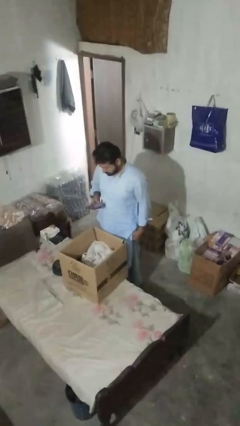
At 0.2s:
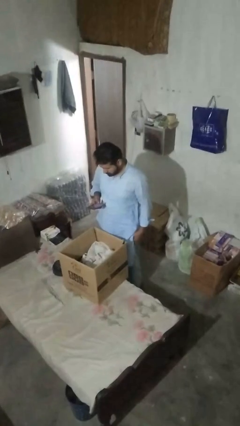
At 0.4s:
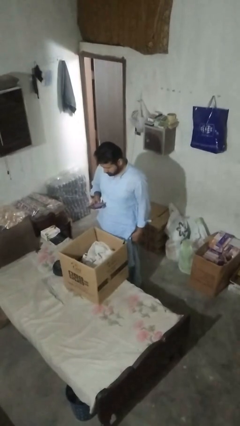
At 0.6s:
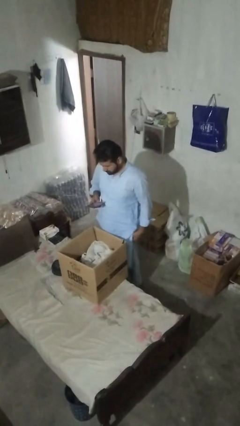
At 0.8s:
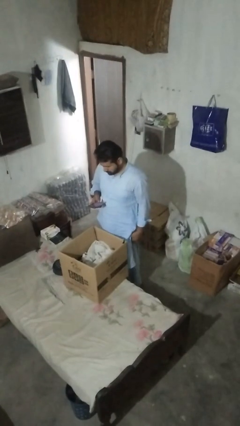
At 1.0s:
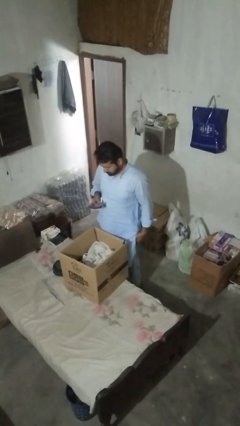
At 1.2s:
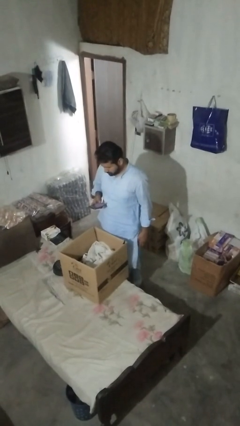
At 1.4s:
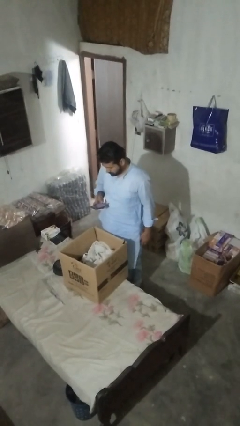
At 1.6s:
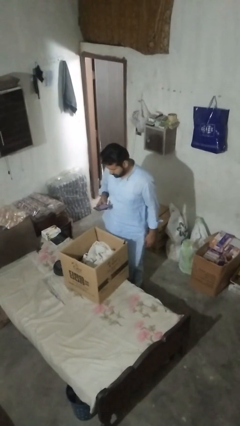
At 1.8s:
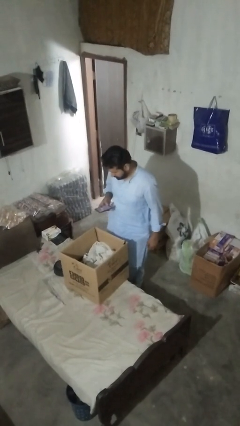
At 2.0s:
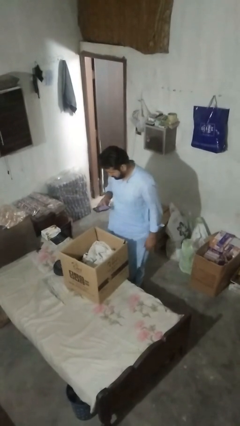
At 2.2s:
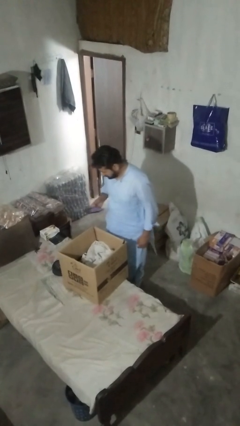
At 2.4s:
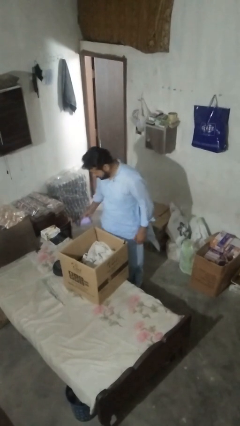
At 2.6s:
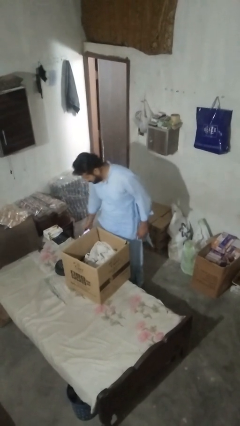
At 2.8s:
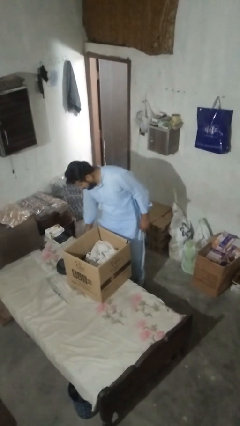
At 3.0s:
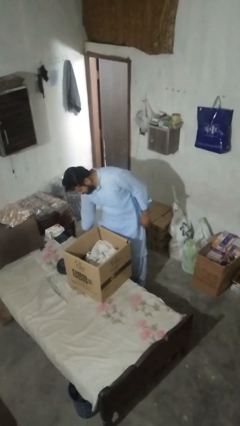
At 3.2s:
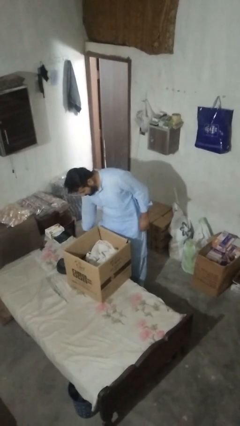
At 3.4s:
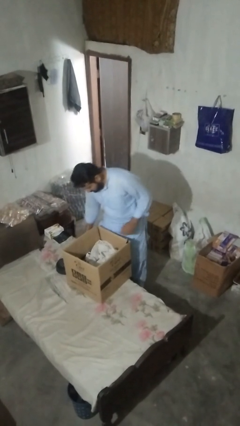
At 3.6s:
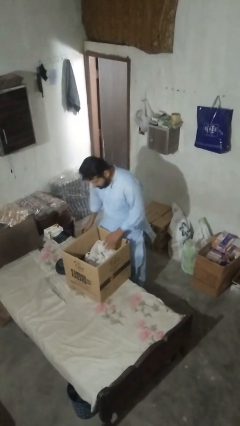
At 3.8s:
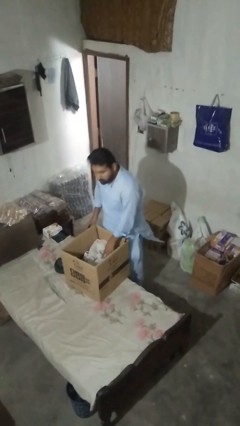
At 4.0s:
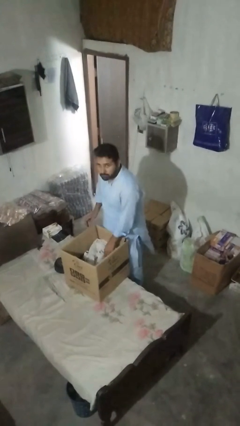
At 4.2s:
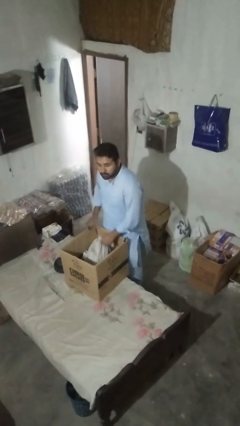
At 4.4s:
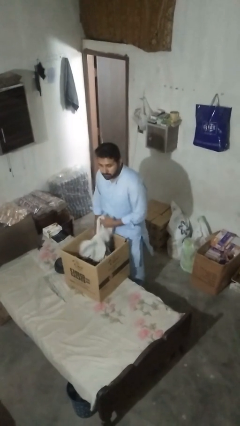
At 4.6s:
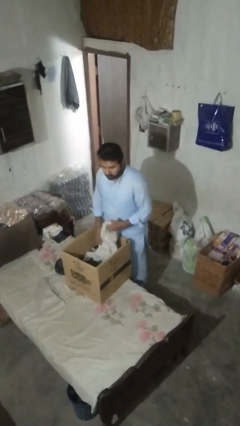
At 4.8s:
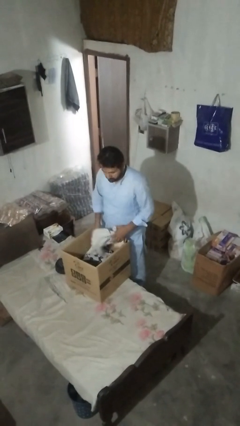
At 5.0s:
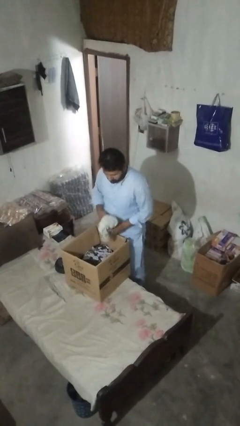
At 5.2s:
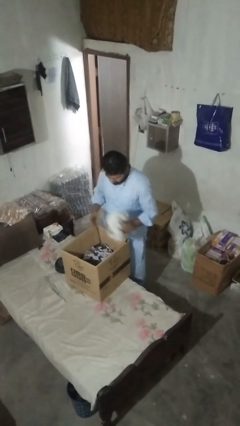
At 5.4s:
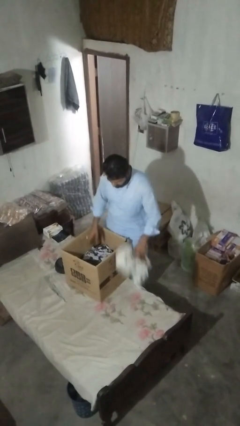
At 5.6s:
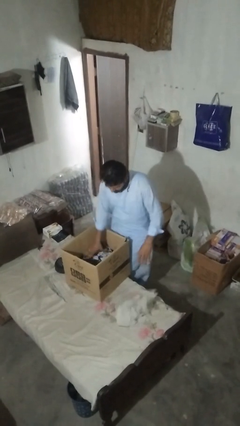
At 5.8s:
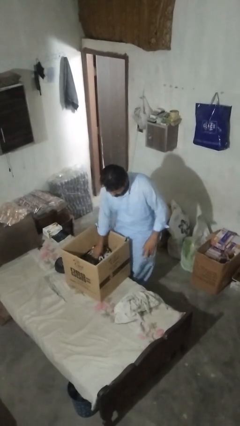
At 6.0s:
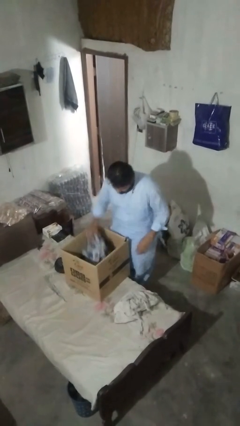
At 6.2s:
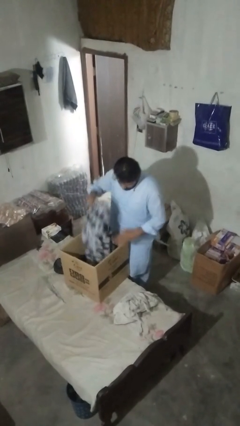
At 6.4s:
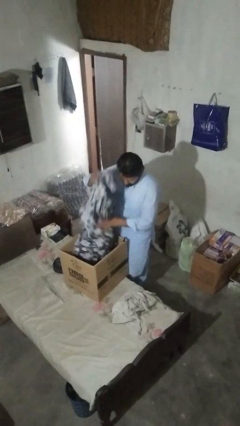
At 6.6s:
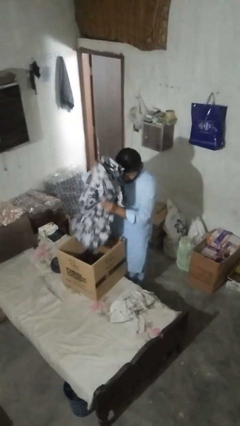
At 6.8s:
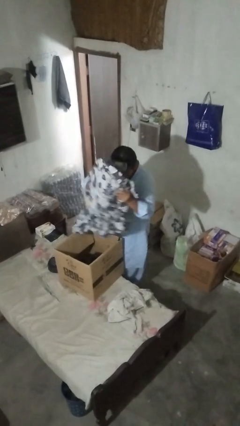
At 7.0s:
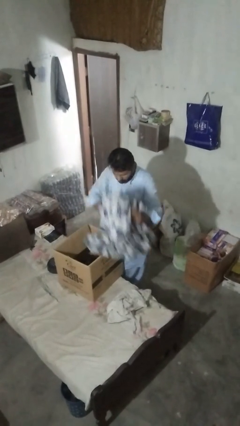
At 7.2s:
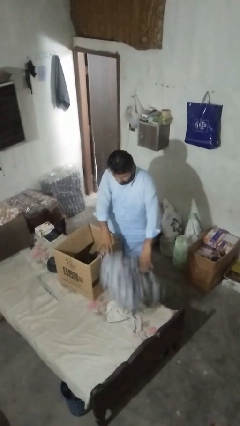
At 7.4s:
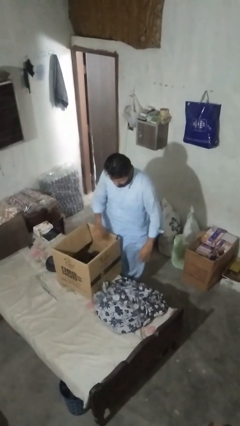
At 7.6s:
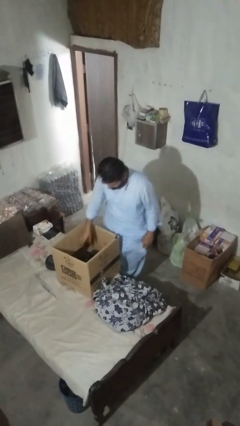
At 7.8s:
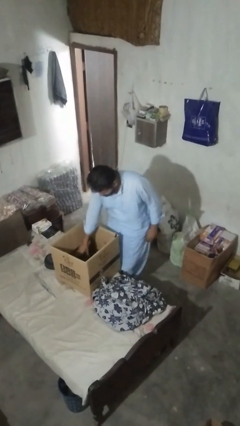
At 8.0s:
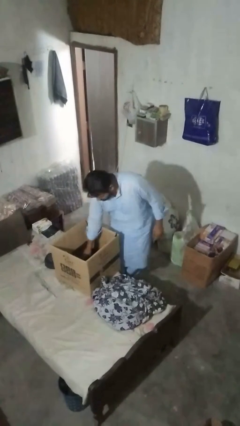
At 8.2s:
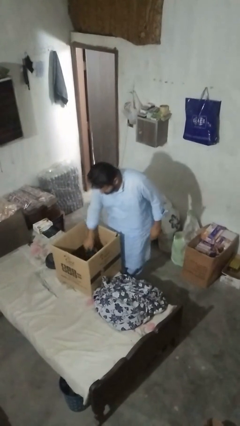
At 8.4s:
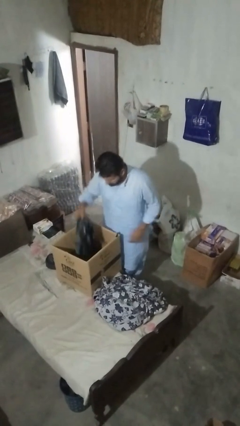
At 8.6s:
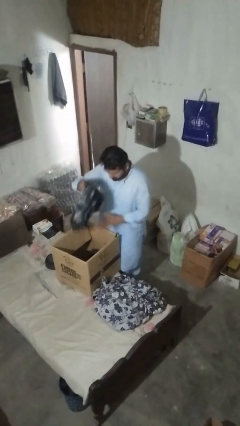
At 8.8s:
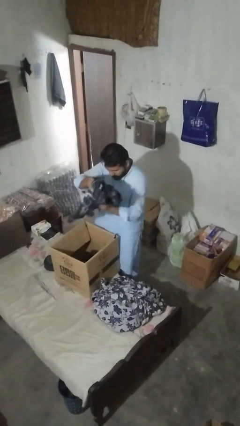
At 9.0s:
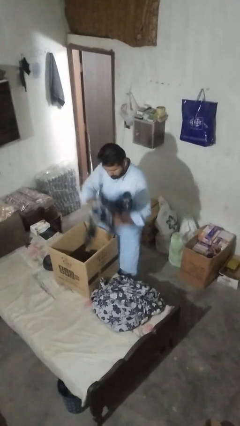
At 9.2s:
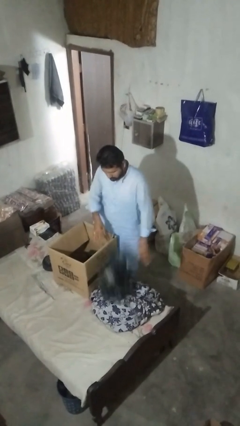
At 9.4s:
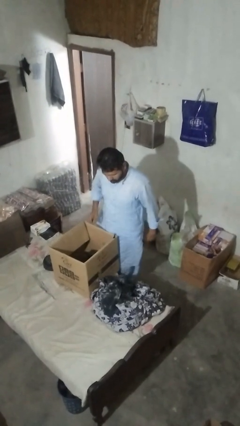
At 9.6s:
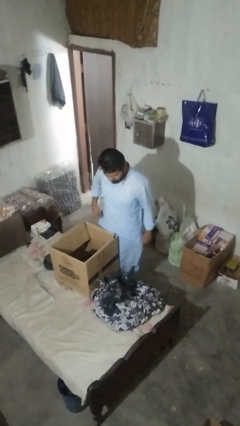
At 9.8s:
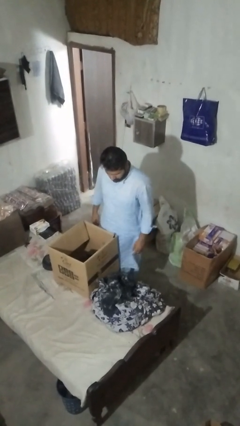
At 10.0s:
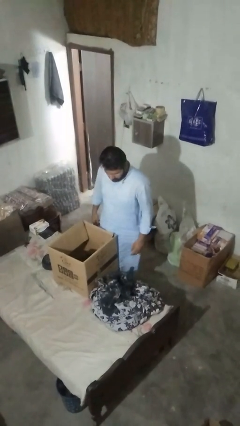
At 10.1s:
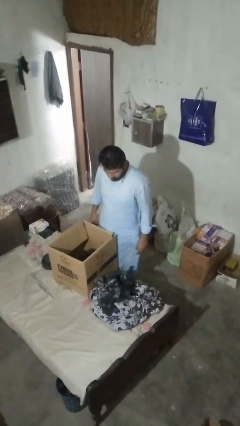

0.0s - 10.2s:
person unloads clotheswasher

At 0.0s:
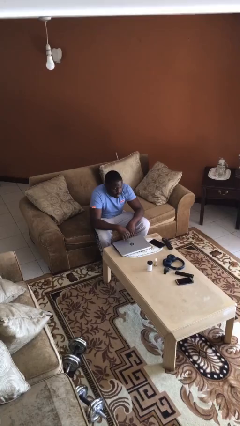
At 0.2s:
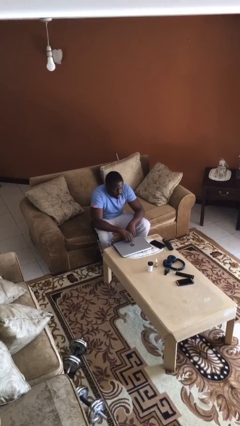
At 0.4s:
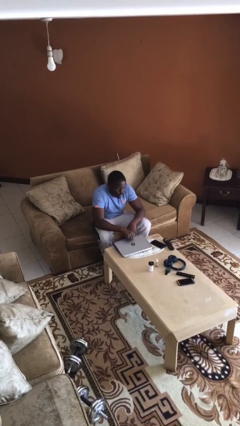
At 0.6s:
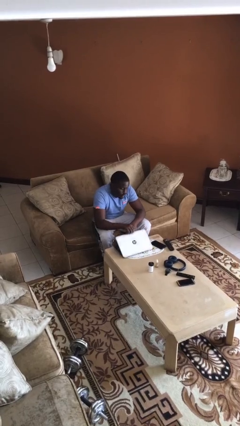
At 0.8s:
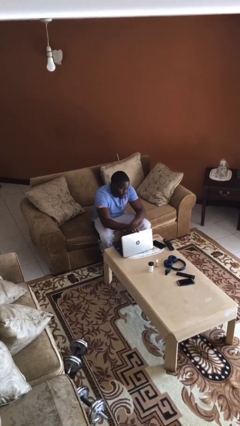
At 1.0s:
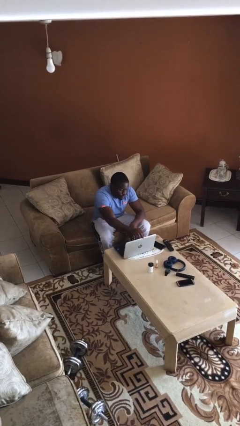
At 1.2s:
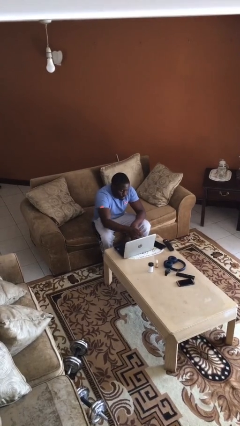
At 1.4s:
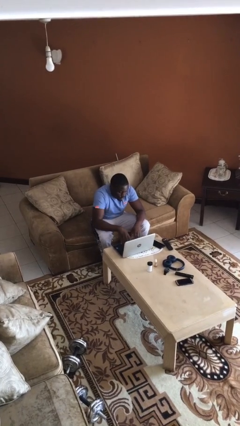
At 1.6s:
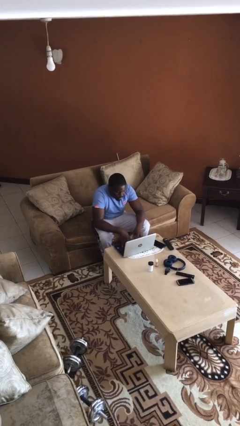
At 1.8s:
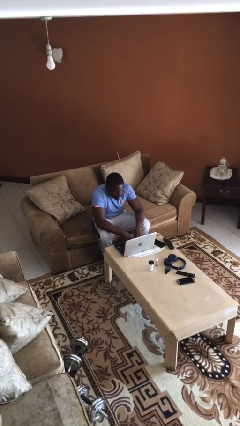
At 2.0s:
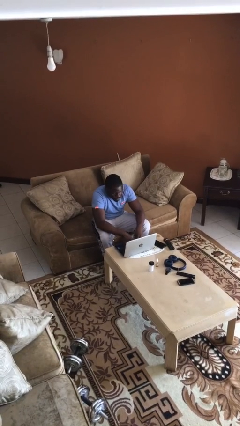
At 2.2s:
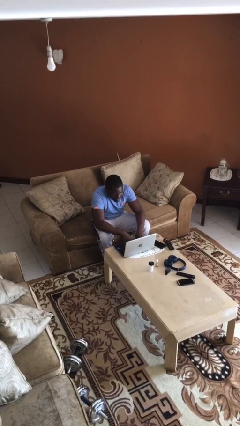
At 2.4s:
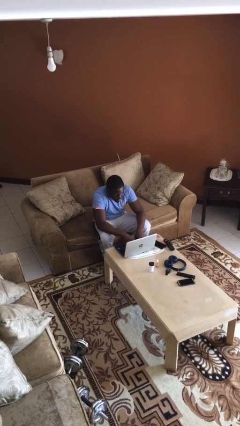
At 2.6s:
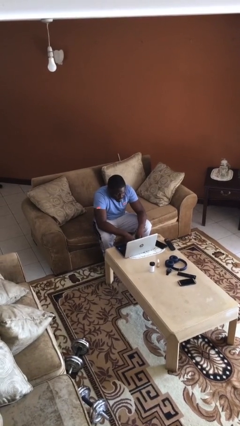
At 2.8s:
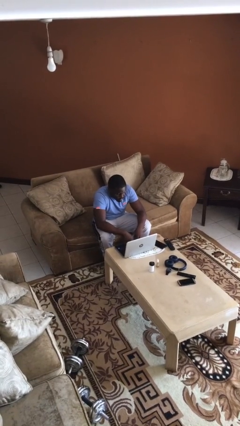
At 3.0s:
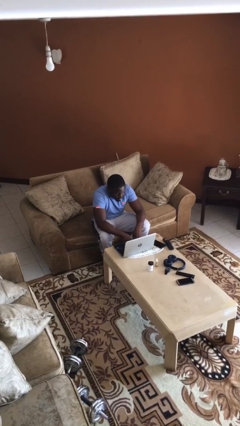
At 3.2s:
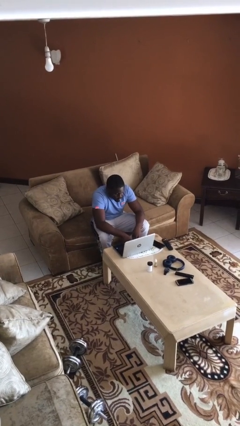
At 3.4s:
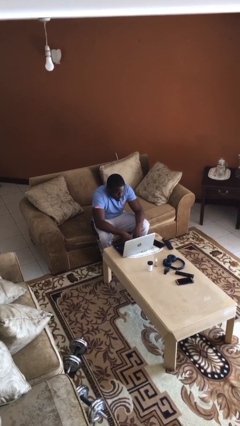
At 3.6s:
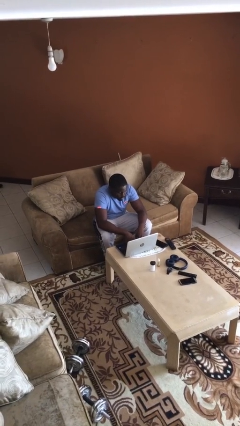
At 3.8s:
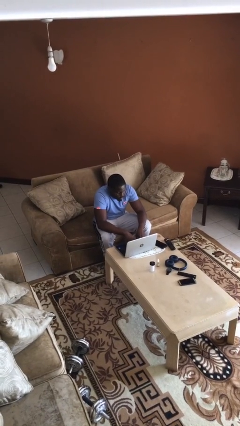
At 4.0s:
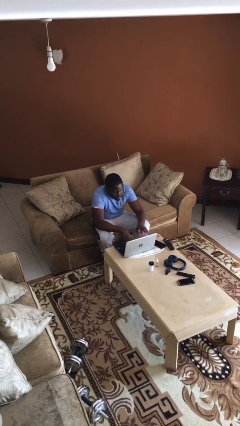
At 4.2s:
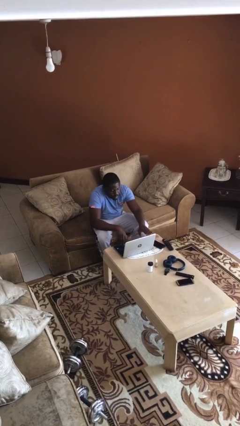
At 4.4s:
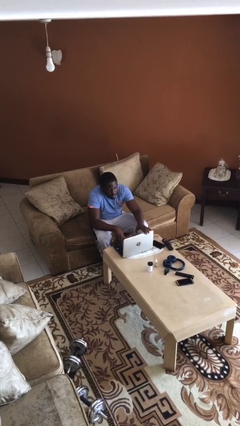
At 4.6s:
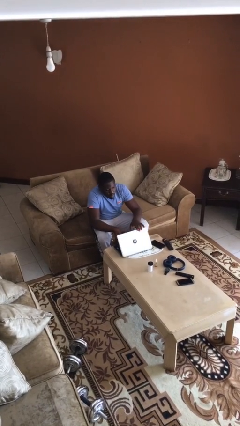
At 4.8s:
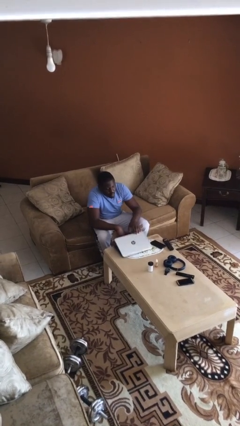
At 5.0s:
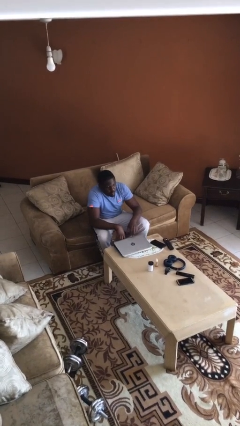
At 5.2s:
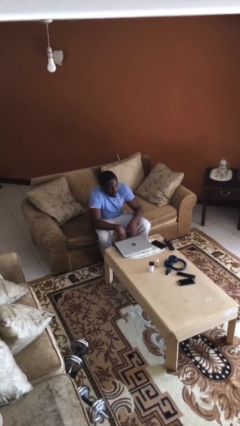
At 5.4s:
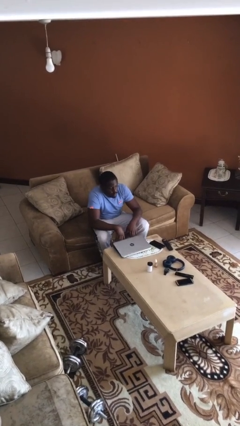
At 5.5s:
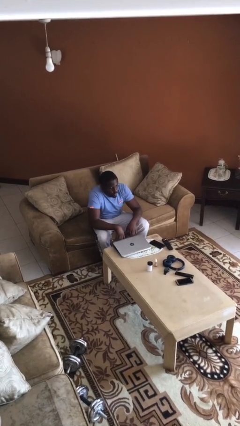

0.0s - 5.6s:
person interacts with laptop

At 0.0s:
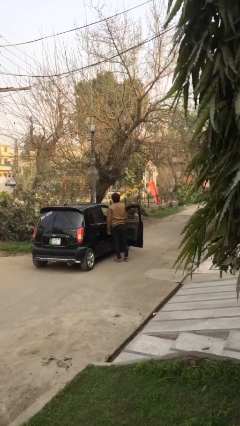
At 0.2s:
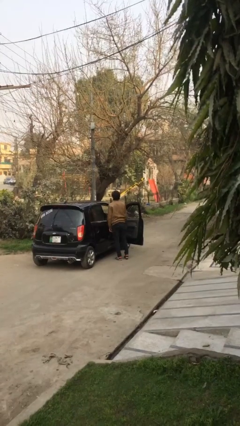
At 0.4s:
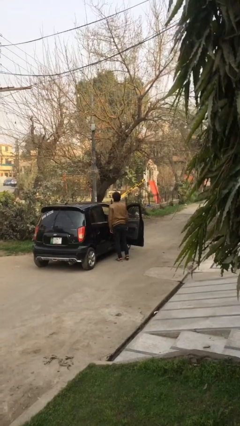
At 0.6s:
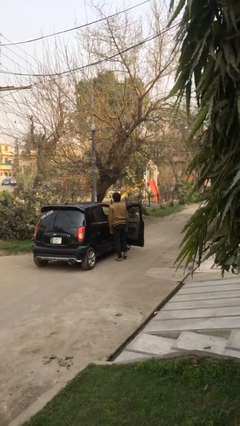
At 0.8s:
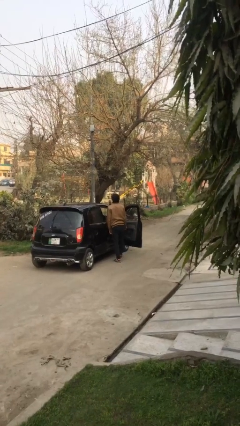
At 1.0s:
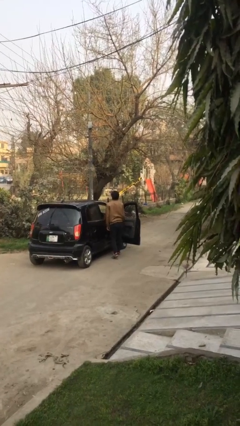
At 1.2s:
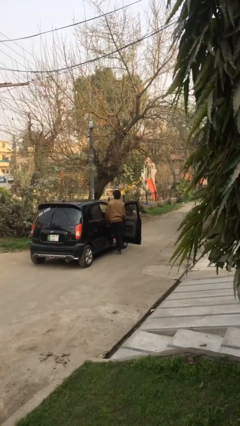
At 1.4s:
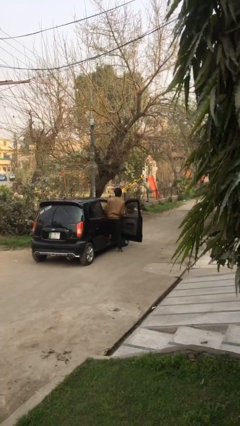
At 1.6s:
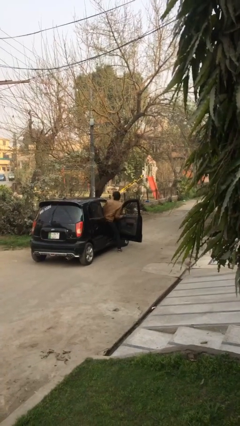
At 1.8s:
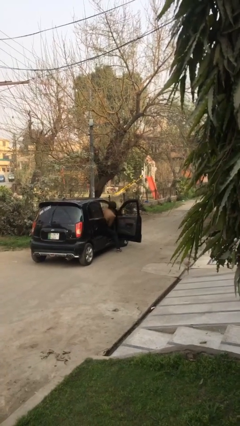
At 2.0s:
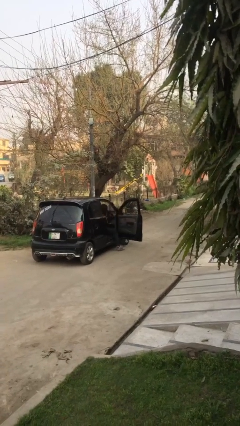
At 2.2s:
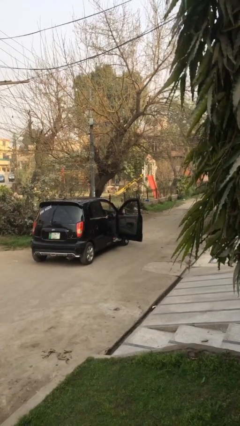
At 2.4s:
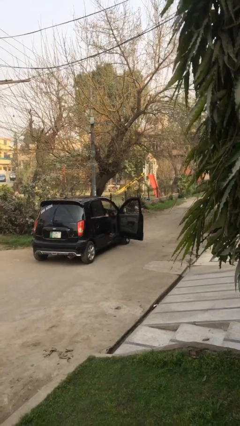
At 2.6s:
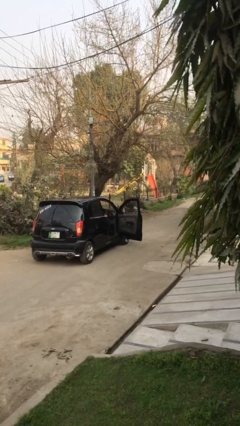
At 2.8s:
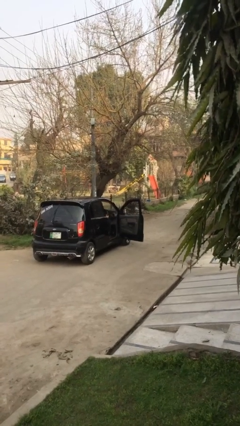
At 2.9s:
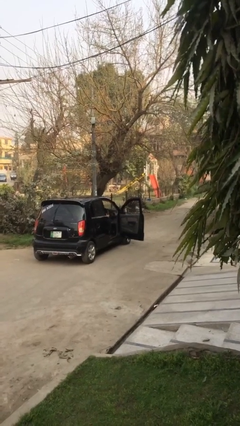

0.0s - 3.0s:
person enters car
